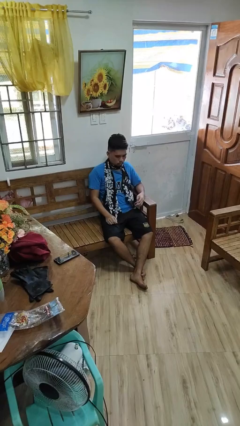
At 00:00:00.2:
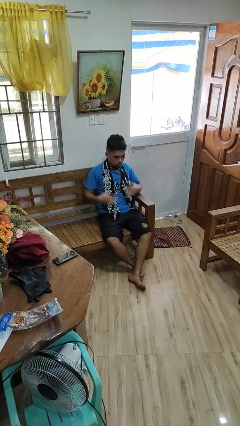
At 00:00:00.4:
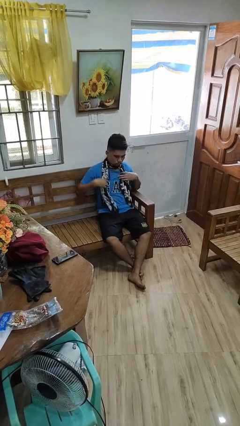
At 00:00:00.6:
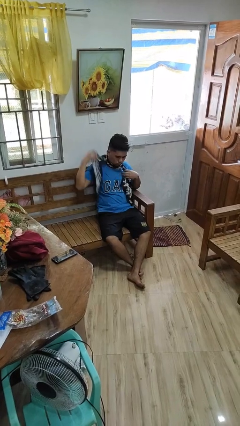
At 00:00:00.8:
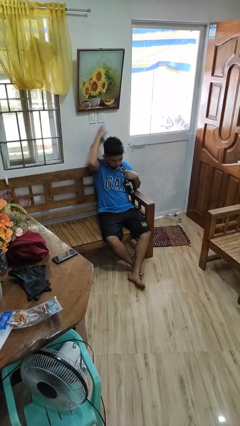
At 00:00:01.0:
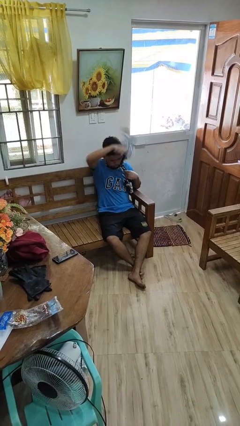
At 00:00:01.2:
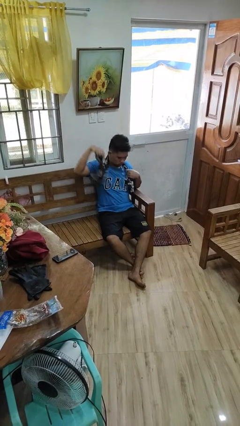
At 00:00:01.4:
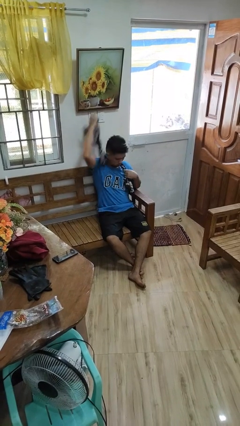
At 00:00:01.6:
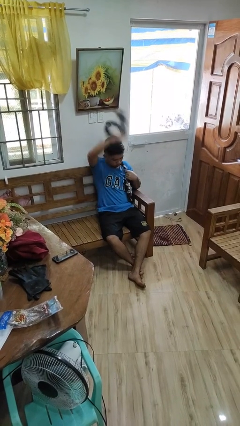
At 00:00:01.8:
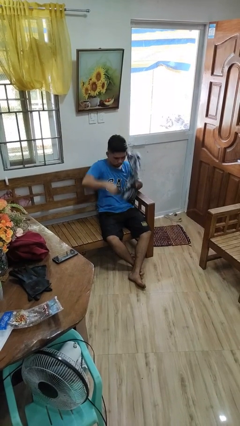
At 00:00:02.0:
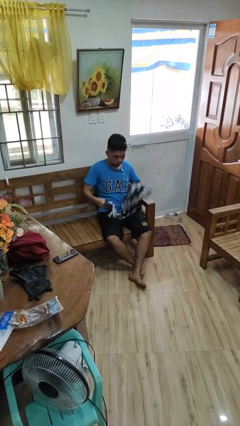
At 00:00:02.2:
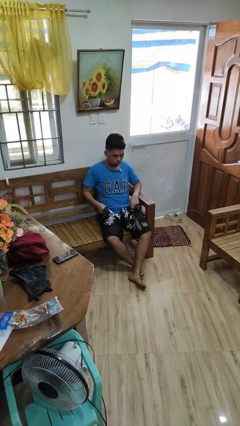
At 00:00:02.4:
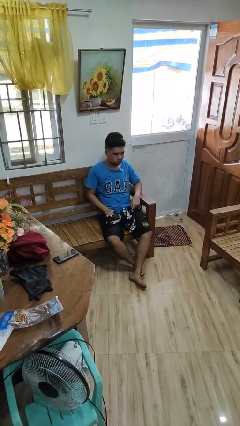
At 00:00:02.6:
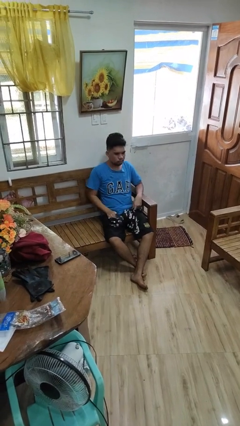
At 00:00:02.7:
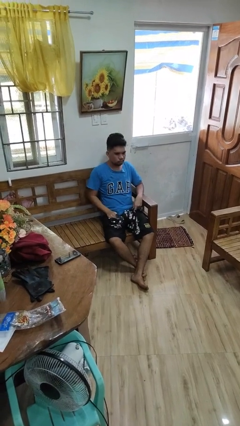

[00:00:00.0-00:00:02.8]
person takes off scarf

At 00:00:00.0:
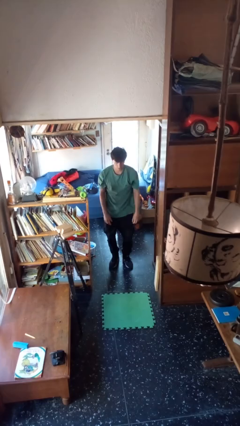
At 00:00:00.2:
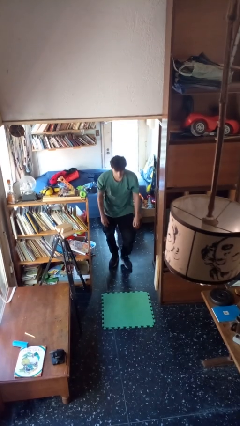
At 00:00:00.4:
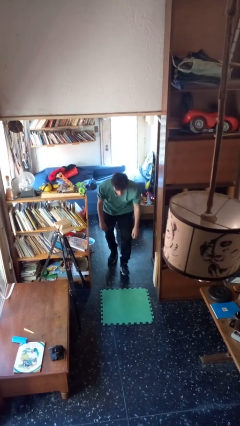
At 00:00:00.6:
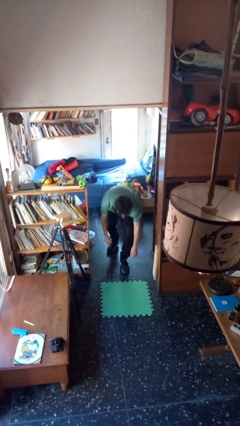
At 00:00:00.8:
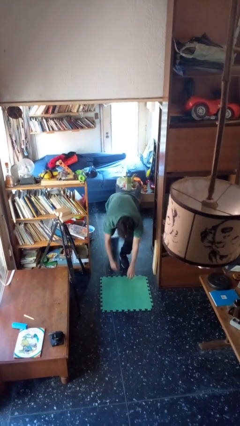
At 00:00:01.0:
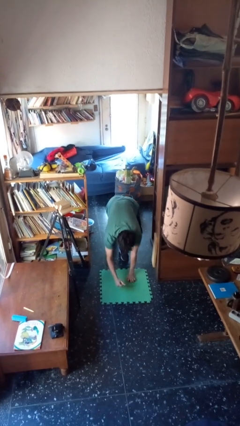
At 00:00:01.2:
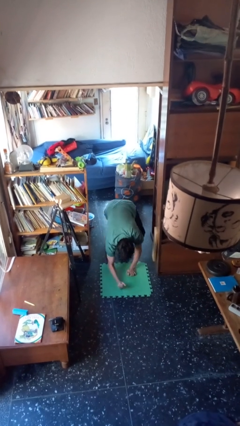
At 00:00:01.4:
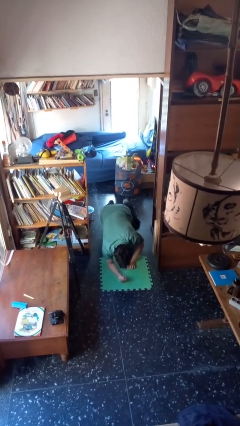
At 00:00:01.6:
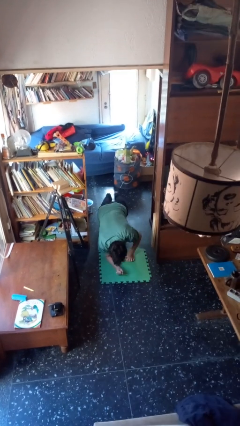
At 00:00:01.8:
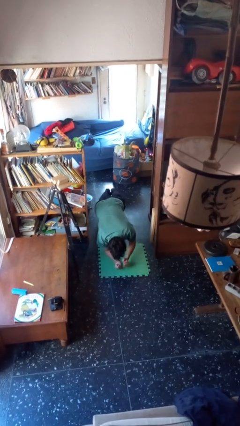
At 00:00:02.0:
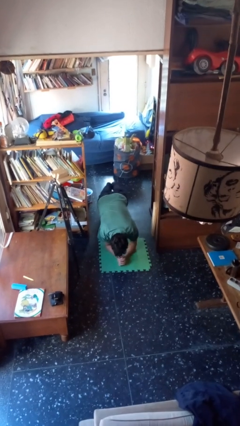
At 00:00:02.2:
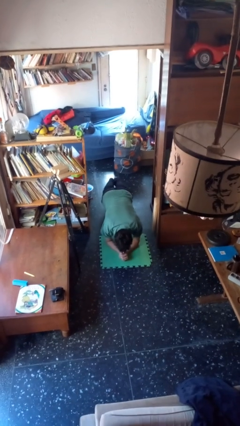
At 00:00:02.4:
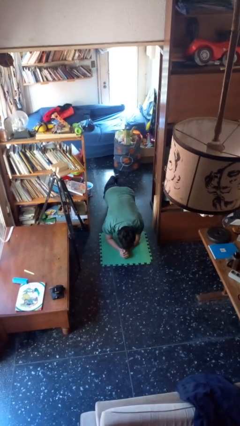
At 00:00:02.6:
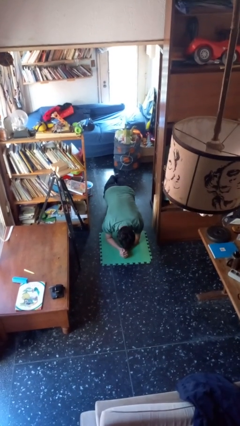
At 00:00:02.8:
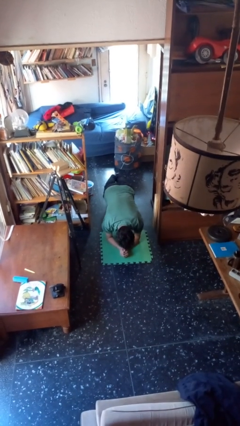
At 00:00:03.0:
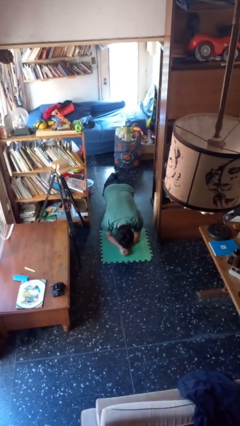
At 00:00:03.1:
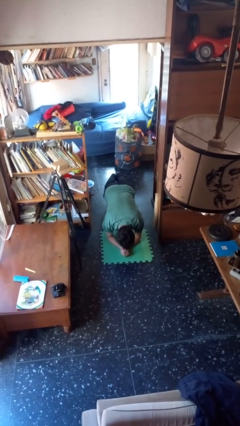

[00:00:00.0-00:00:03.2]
person exercises with plank

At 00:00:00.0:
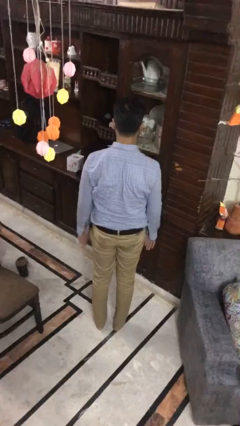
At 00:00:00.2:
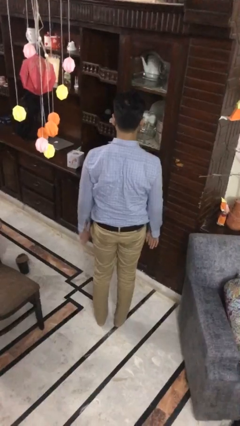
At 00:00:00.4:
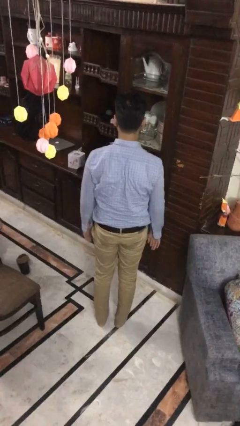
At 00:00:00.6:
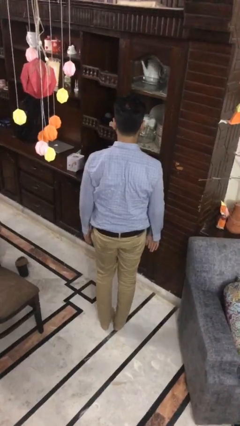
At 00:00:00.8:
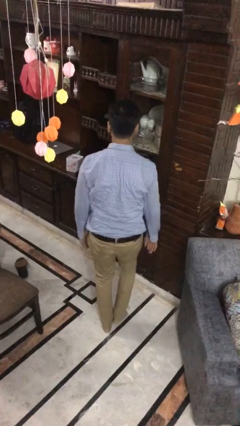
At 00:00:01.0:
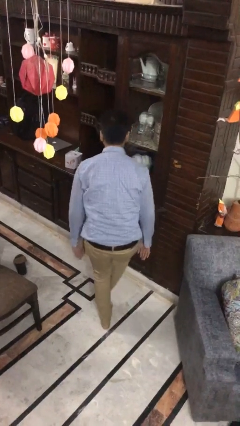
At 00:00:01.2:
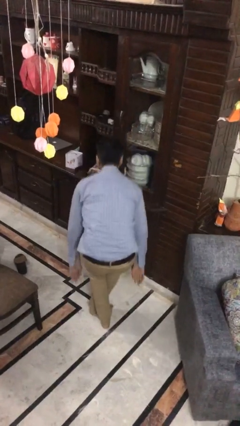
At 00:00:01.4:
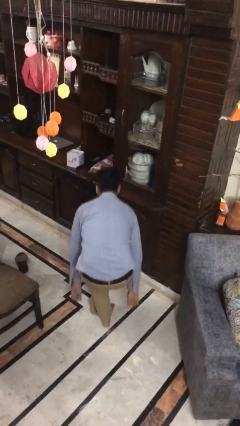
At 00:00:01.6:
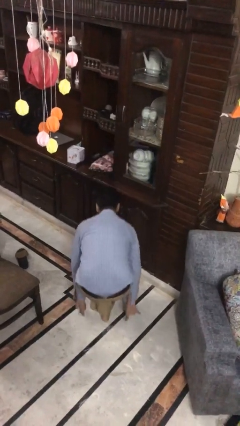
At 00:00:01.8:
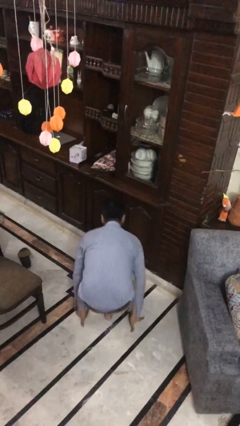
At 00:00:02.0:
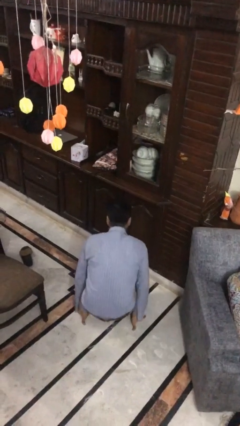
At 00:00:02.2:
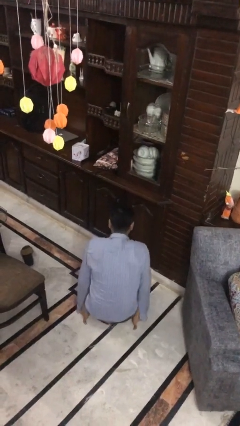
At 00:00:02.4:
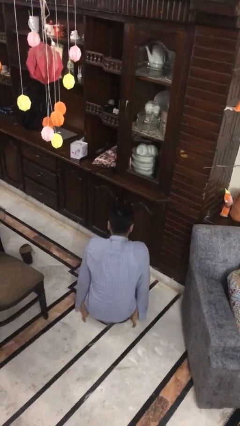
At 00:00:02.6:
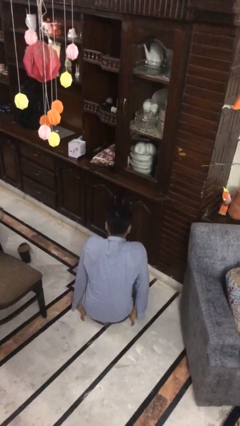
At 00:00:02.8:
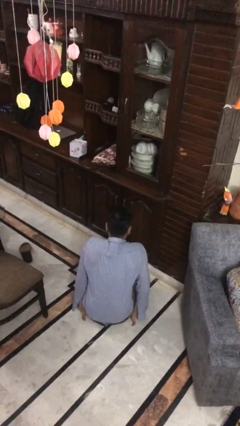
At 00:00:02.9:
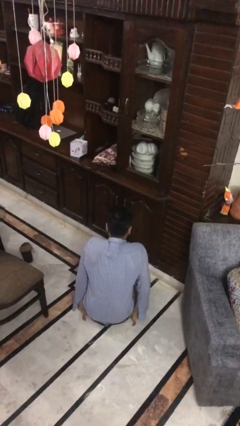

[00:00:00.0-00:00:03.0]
person sits crisscross

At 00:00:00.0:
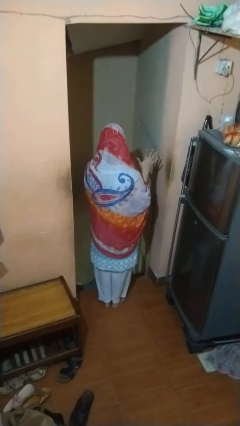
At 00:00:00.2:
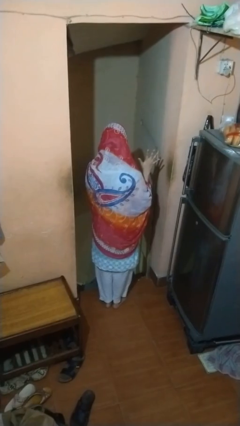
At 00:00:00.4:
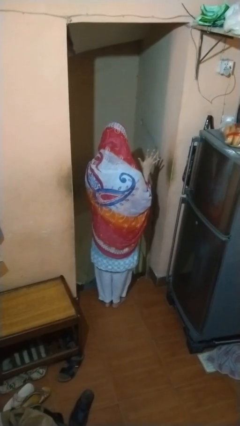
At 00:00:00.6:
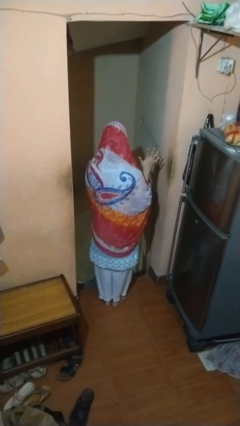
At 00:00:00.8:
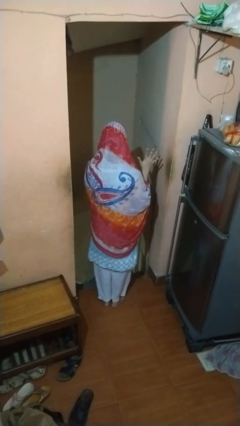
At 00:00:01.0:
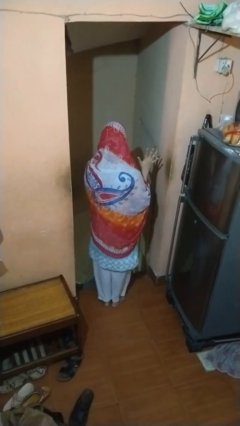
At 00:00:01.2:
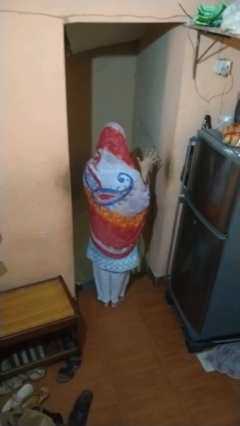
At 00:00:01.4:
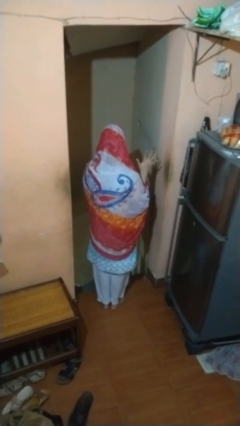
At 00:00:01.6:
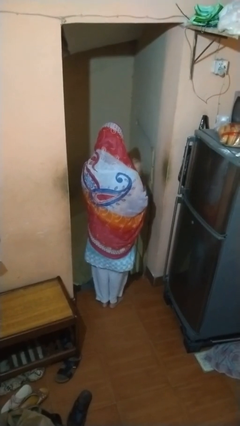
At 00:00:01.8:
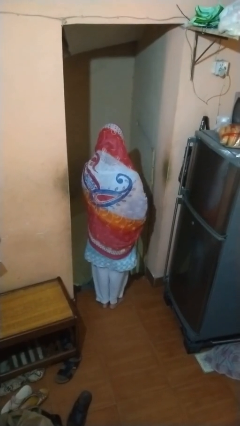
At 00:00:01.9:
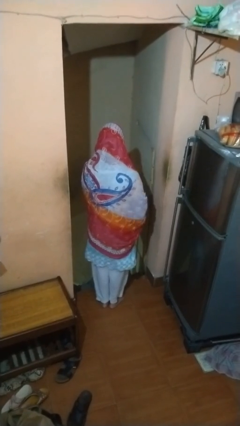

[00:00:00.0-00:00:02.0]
person gestures number five

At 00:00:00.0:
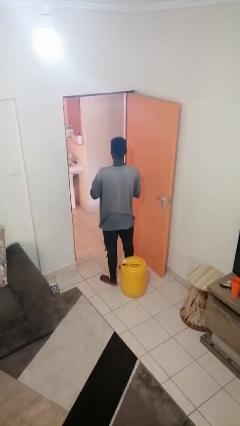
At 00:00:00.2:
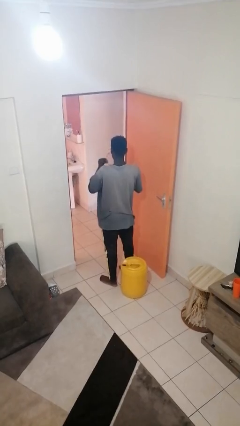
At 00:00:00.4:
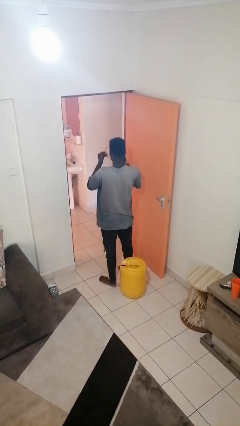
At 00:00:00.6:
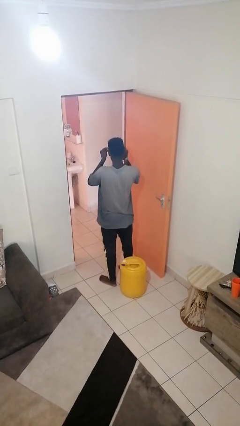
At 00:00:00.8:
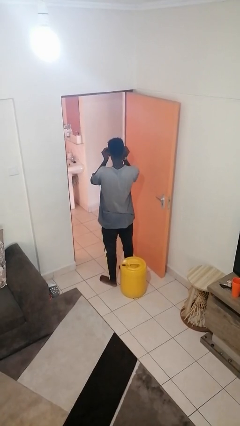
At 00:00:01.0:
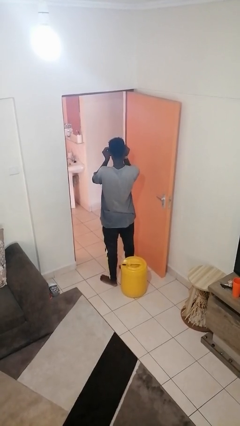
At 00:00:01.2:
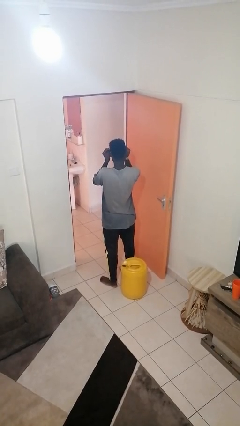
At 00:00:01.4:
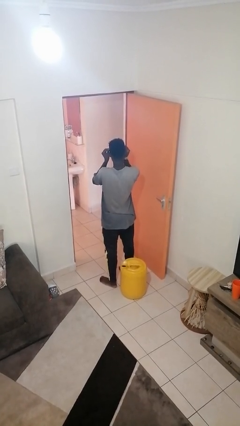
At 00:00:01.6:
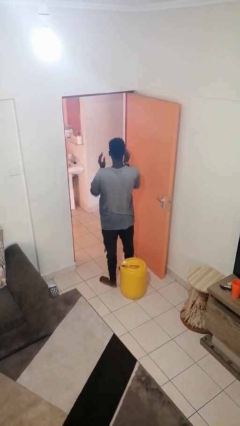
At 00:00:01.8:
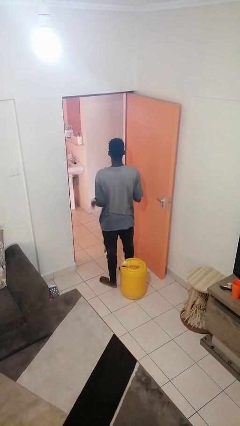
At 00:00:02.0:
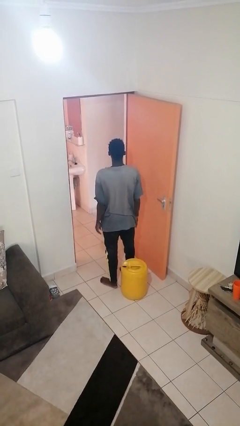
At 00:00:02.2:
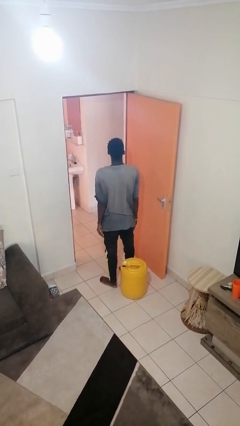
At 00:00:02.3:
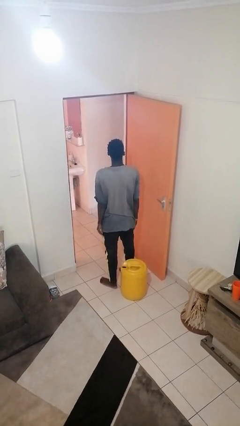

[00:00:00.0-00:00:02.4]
person puts on glasses

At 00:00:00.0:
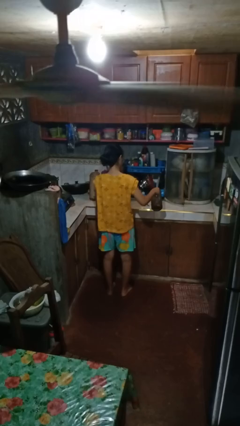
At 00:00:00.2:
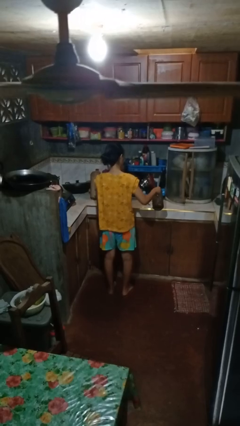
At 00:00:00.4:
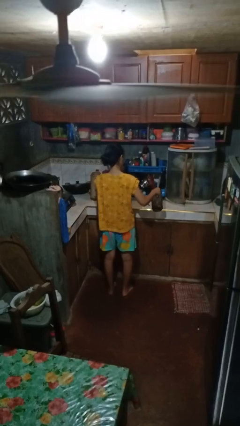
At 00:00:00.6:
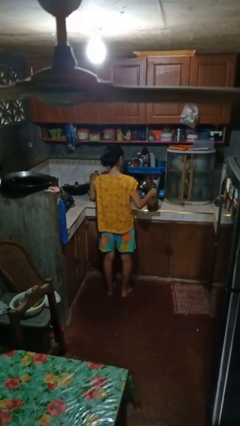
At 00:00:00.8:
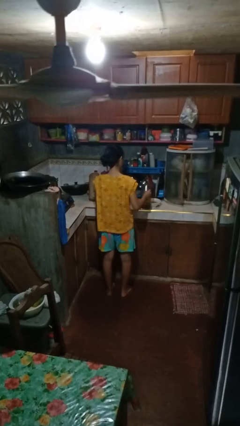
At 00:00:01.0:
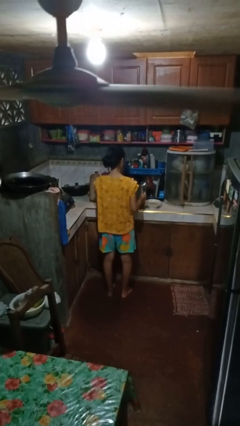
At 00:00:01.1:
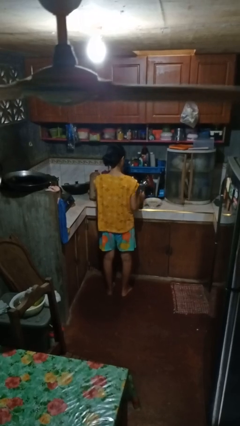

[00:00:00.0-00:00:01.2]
person pours into bowl

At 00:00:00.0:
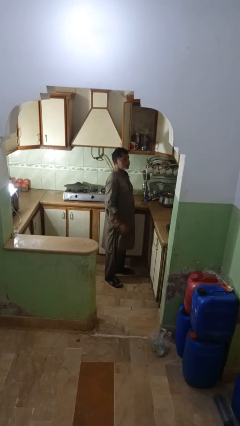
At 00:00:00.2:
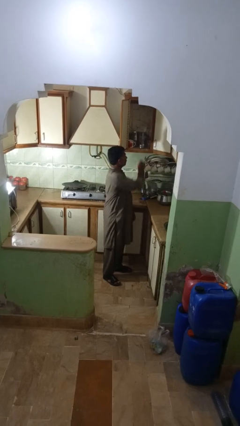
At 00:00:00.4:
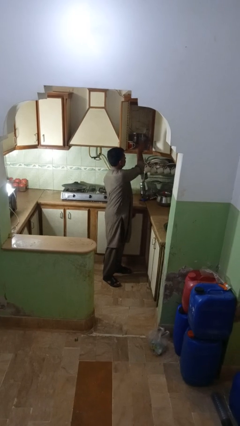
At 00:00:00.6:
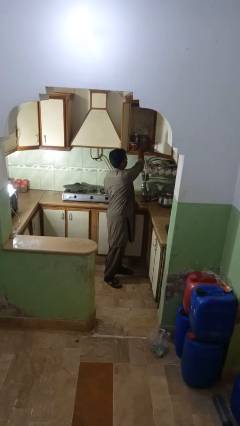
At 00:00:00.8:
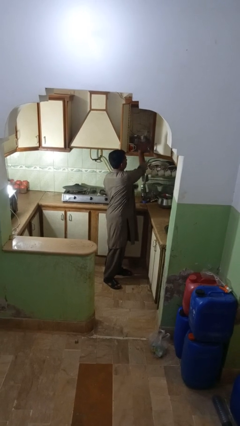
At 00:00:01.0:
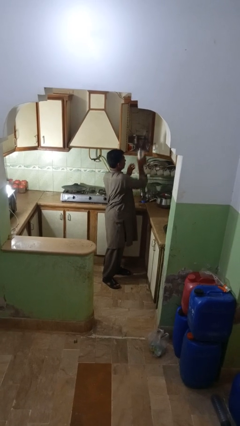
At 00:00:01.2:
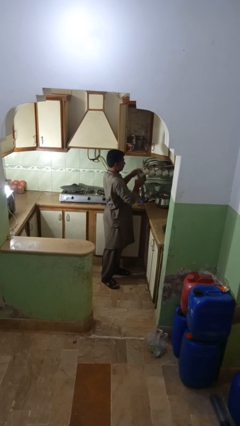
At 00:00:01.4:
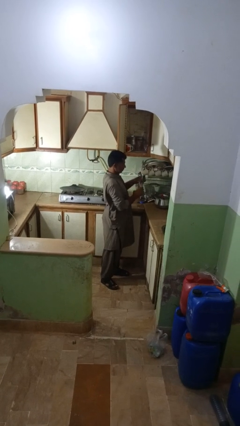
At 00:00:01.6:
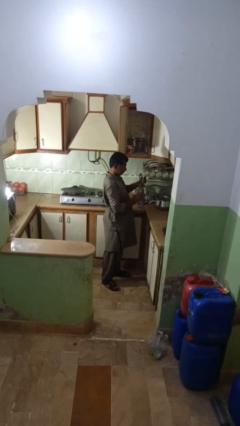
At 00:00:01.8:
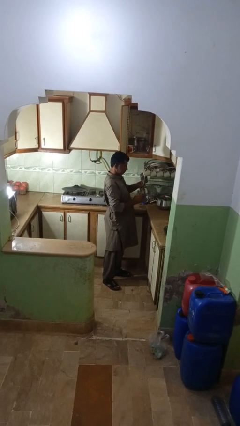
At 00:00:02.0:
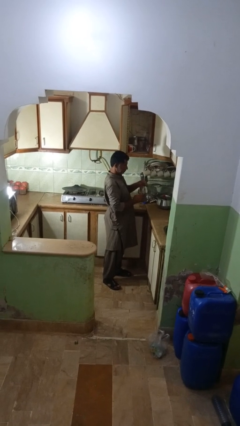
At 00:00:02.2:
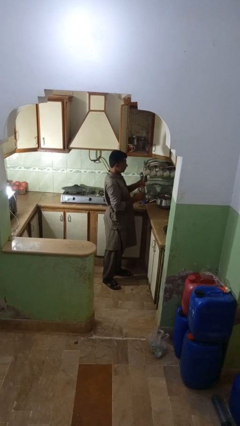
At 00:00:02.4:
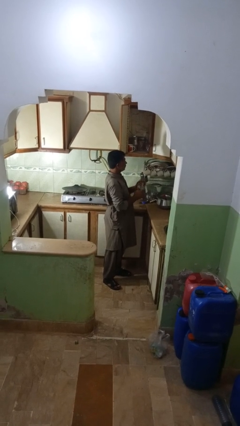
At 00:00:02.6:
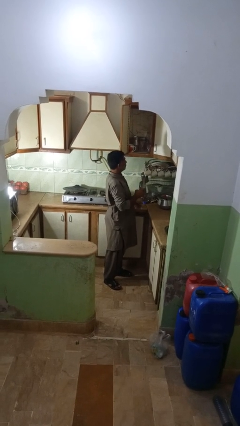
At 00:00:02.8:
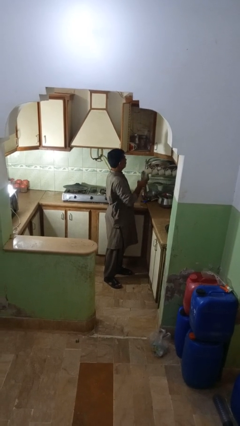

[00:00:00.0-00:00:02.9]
person takes object from kitchen drawer
